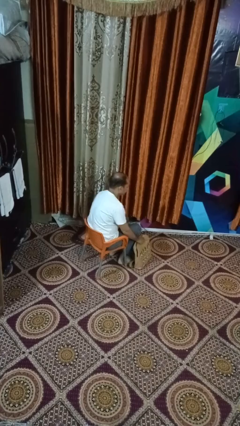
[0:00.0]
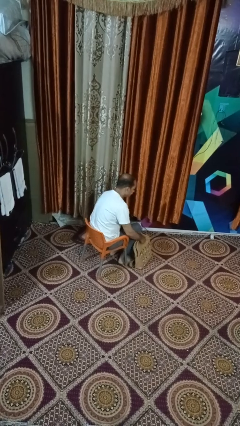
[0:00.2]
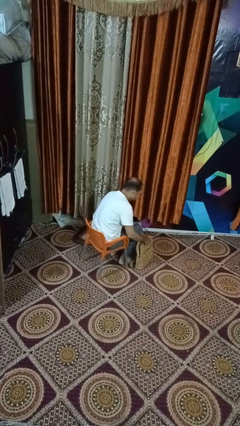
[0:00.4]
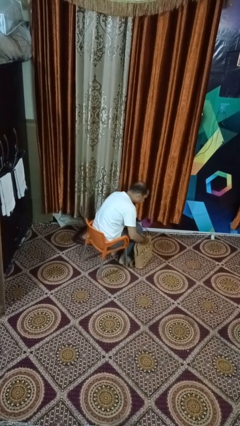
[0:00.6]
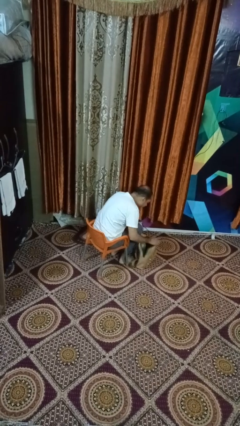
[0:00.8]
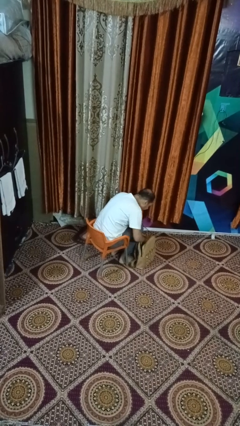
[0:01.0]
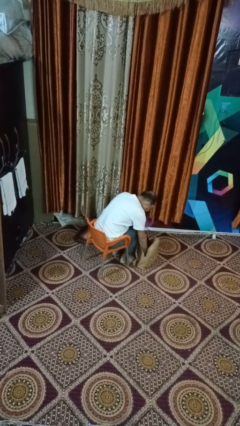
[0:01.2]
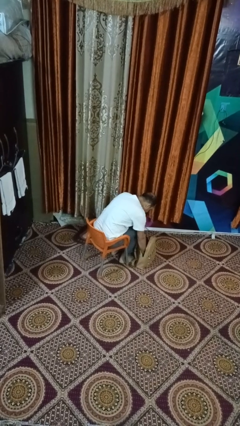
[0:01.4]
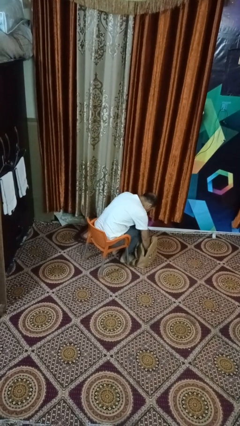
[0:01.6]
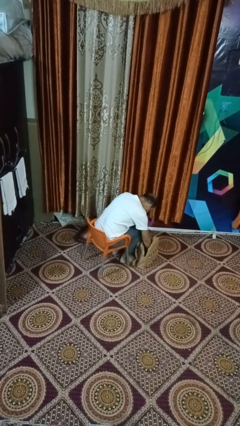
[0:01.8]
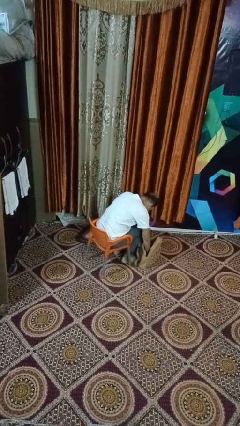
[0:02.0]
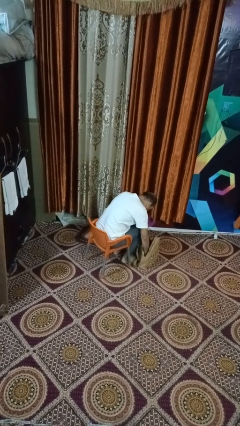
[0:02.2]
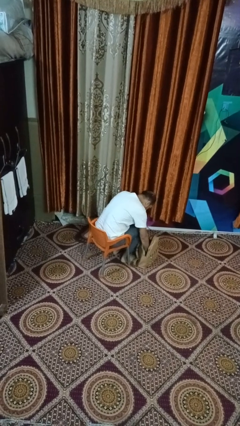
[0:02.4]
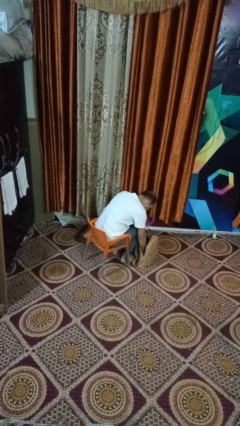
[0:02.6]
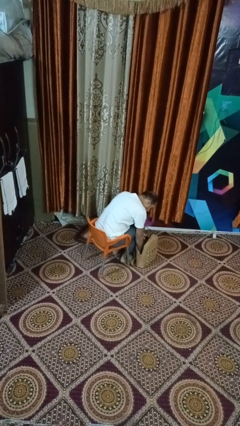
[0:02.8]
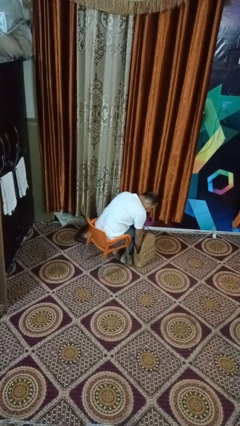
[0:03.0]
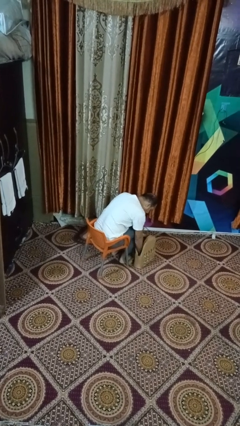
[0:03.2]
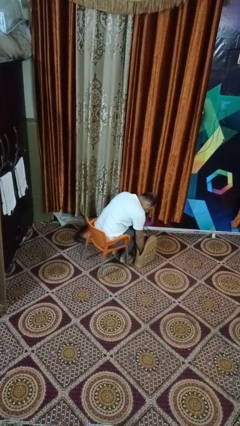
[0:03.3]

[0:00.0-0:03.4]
person searches in purse

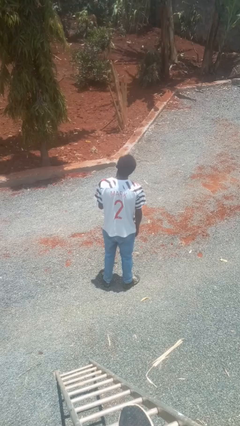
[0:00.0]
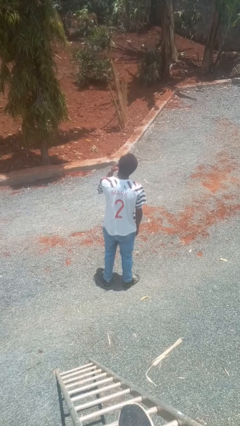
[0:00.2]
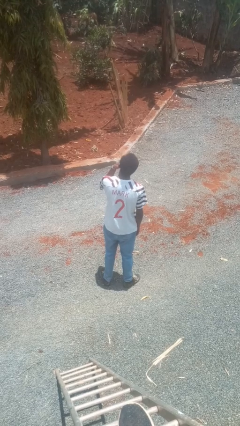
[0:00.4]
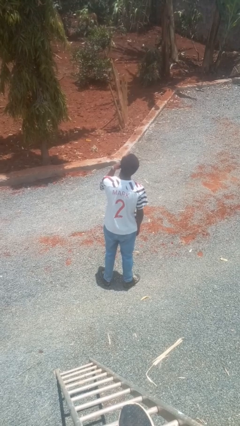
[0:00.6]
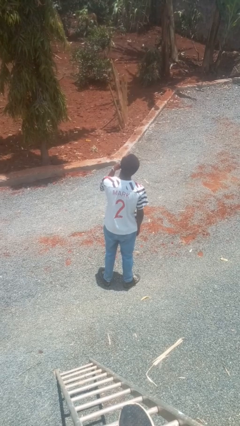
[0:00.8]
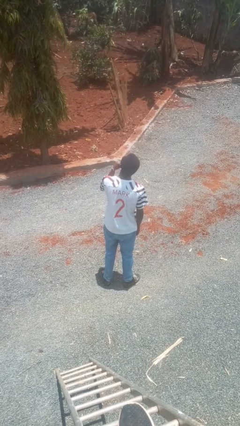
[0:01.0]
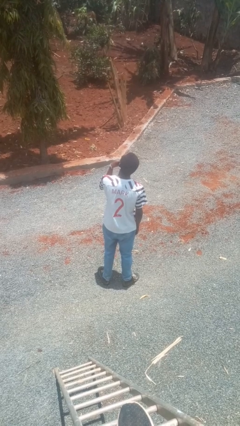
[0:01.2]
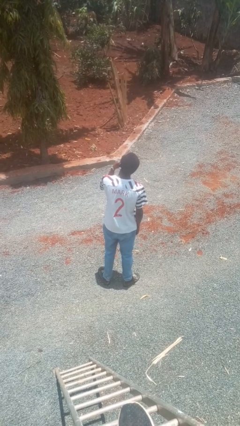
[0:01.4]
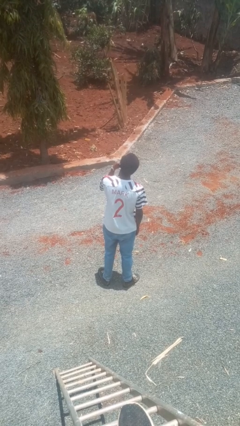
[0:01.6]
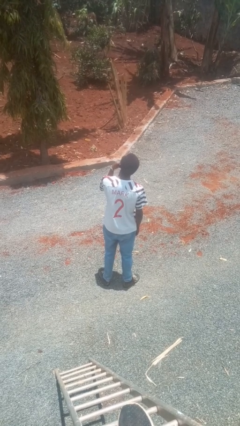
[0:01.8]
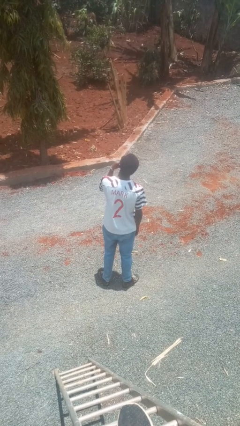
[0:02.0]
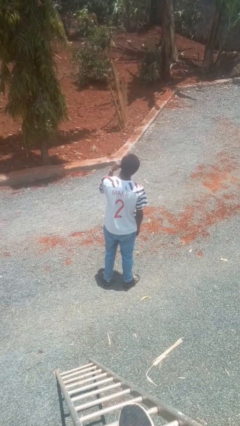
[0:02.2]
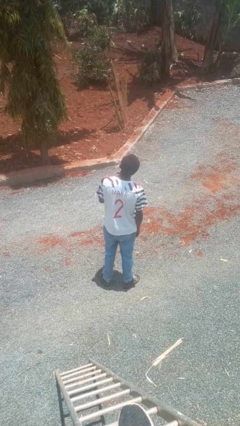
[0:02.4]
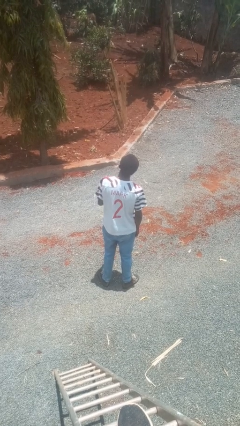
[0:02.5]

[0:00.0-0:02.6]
person strokes chin

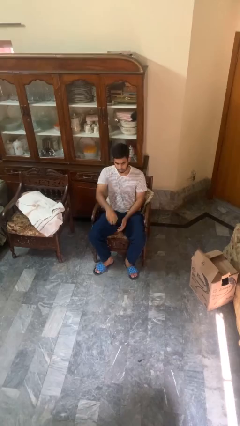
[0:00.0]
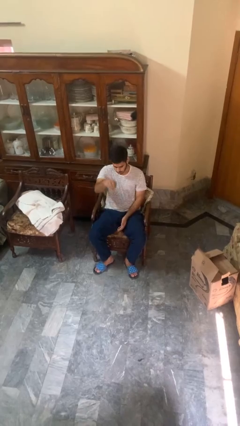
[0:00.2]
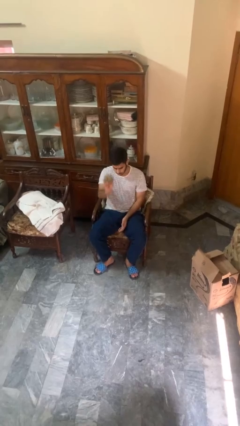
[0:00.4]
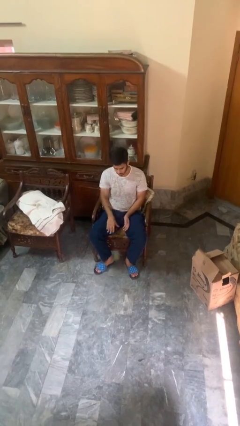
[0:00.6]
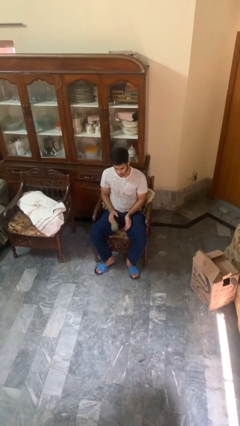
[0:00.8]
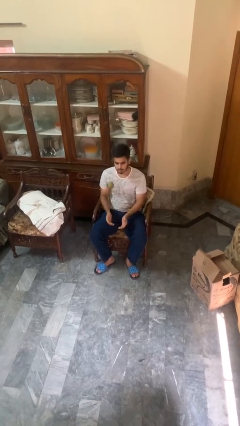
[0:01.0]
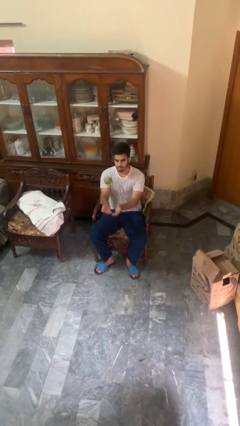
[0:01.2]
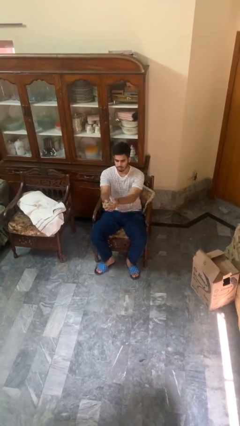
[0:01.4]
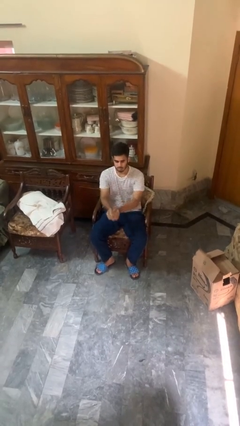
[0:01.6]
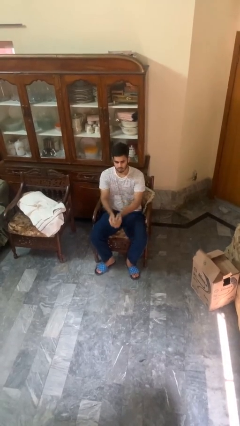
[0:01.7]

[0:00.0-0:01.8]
person bounces ball on floor

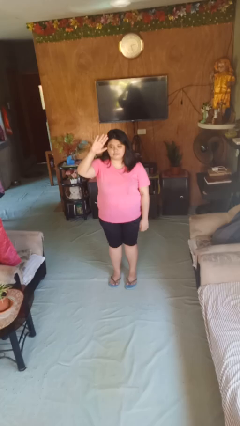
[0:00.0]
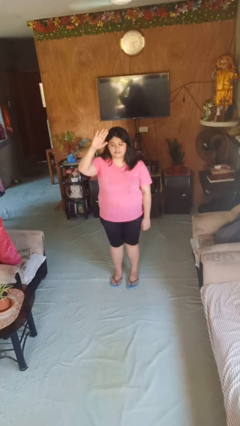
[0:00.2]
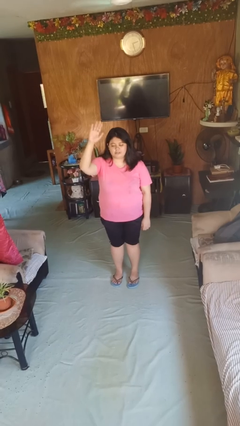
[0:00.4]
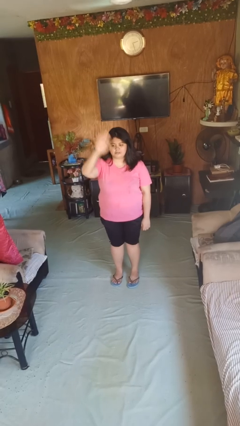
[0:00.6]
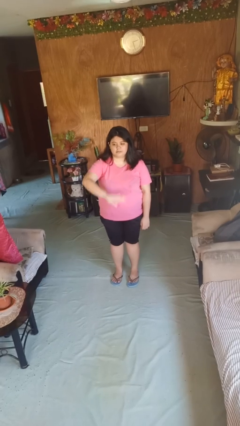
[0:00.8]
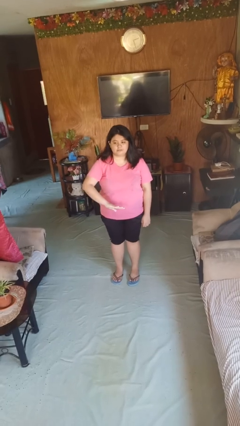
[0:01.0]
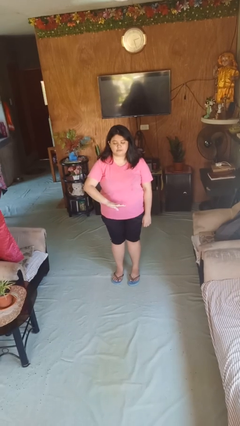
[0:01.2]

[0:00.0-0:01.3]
person gestures swipe down

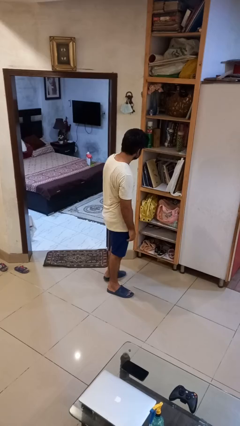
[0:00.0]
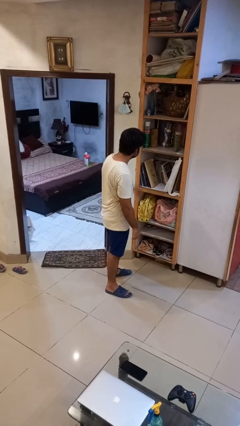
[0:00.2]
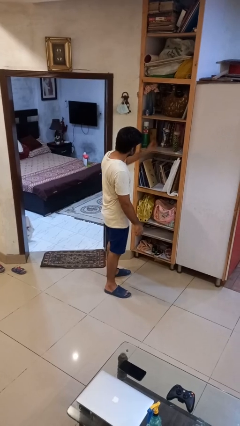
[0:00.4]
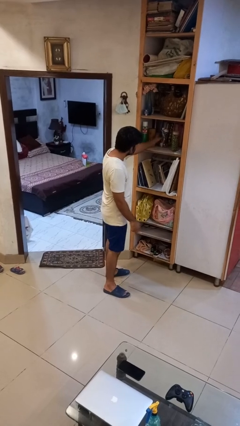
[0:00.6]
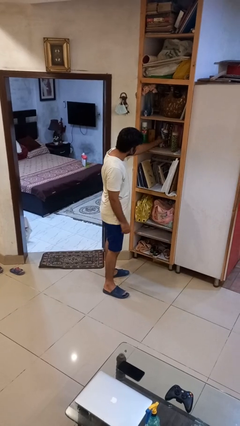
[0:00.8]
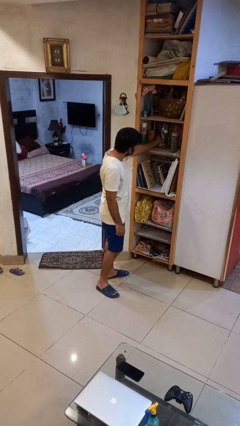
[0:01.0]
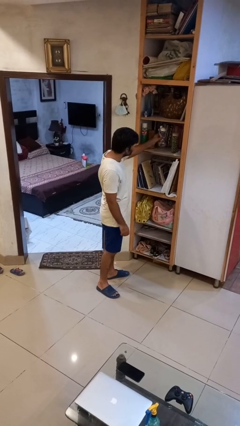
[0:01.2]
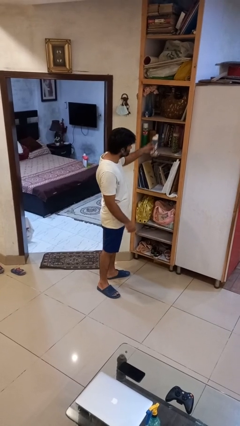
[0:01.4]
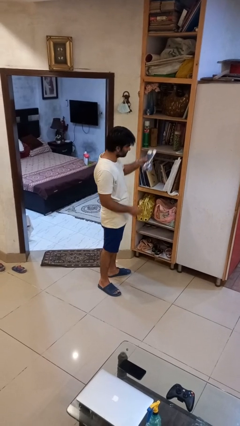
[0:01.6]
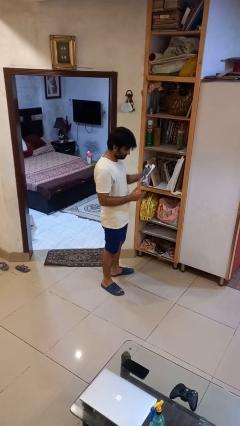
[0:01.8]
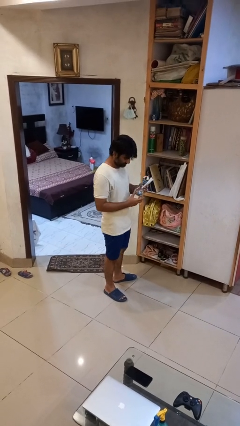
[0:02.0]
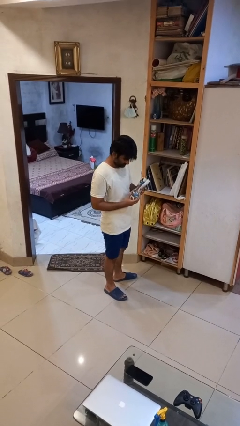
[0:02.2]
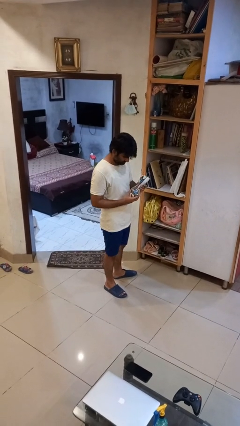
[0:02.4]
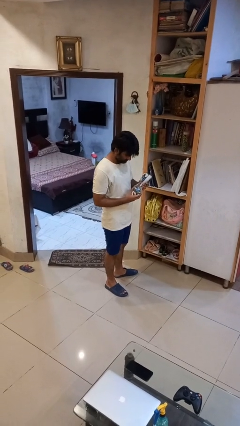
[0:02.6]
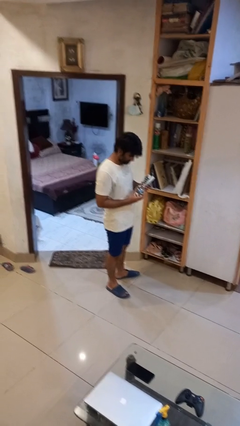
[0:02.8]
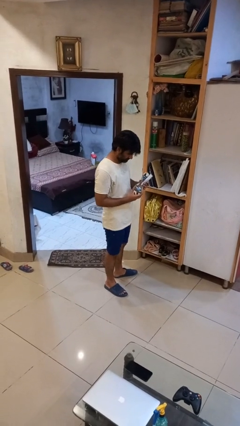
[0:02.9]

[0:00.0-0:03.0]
person picks up object from cabinet

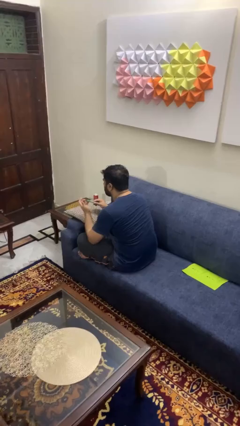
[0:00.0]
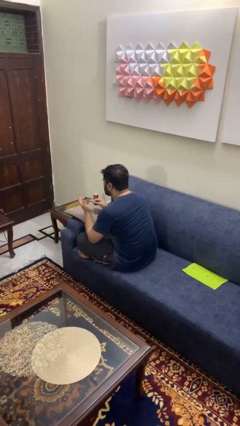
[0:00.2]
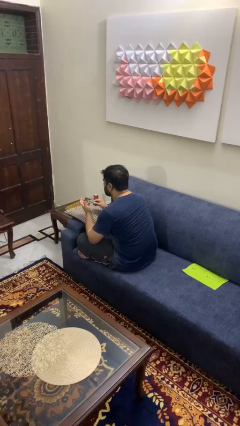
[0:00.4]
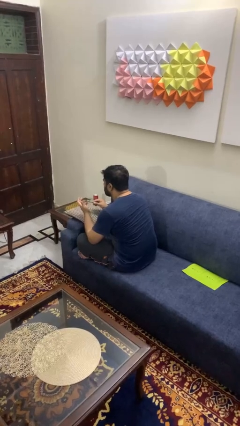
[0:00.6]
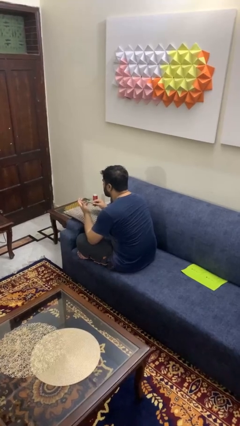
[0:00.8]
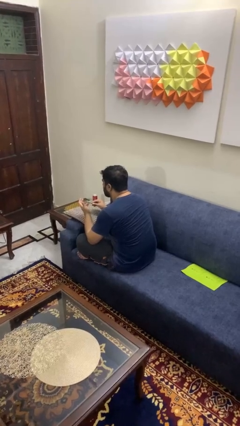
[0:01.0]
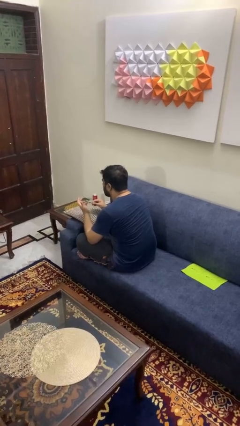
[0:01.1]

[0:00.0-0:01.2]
person files fingernails

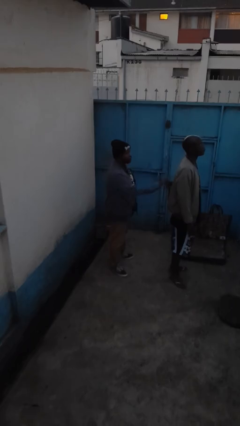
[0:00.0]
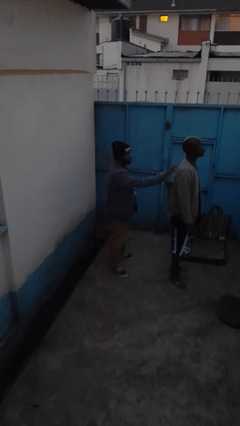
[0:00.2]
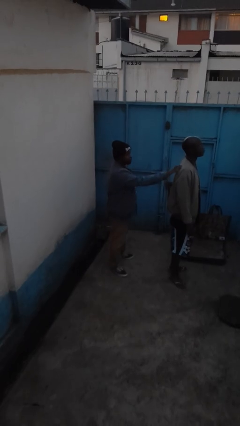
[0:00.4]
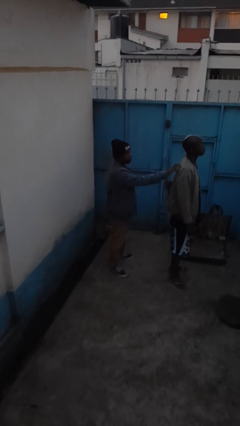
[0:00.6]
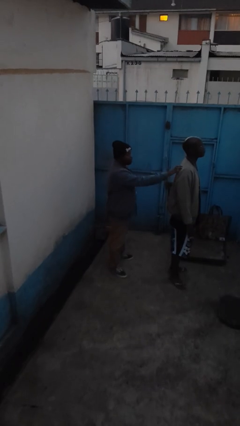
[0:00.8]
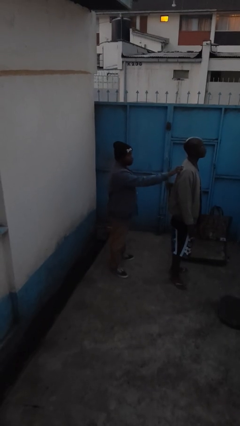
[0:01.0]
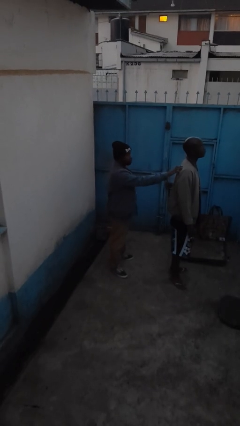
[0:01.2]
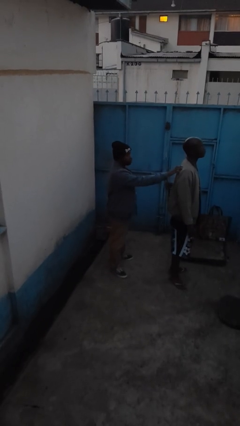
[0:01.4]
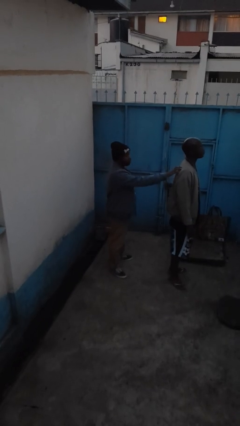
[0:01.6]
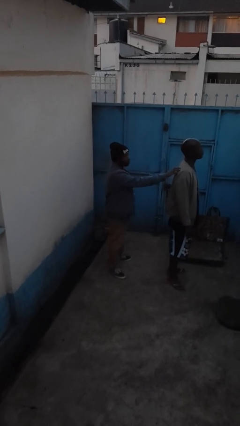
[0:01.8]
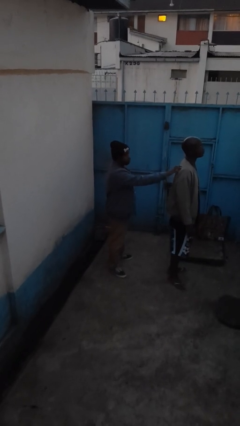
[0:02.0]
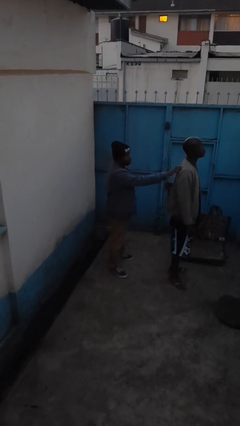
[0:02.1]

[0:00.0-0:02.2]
person touches back of person

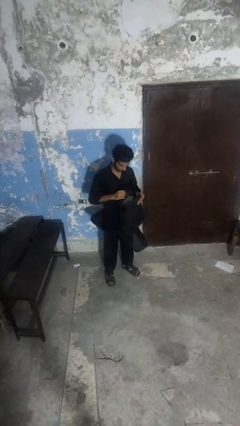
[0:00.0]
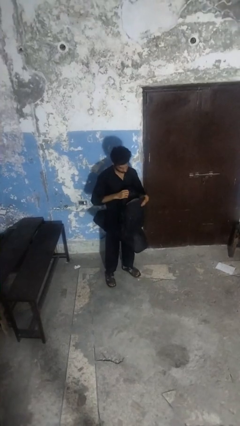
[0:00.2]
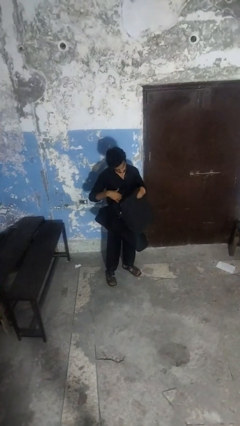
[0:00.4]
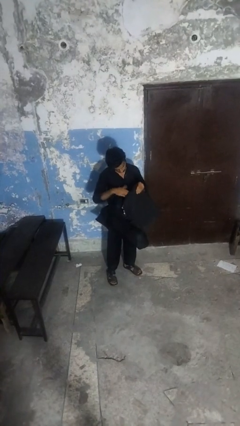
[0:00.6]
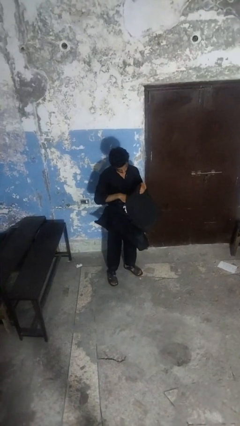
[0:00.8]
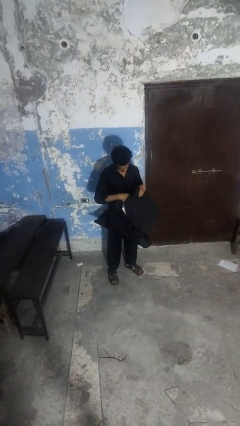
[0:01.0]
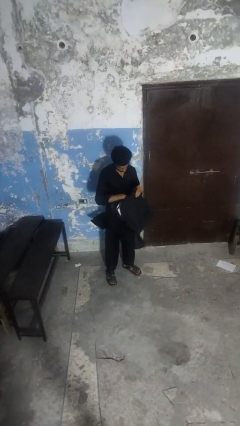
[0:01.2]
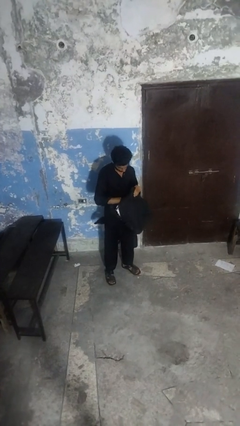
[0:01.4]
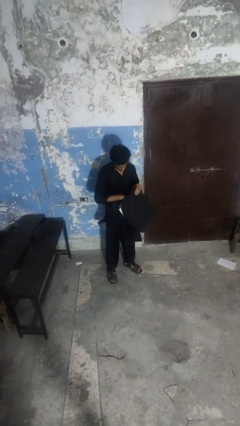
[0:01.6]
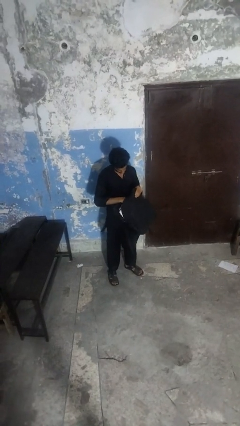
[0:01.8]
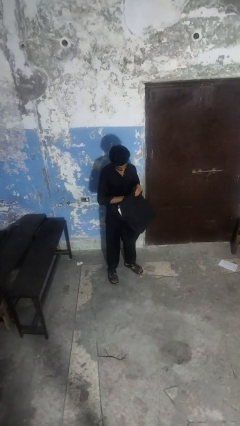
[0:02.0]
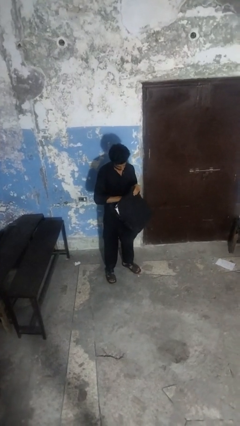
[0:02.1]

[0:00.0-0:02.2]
person searches in backpack
